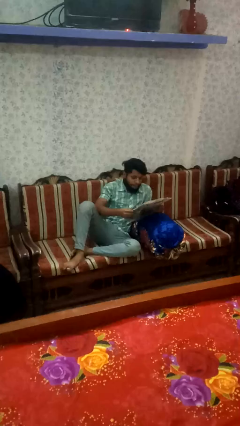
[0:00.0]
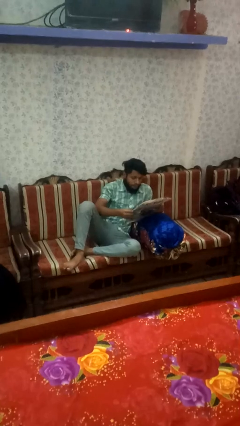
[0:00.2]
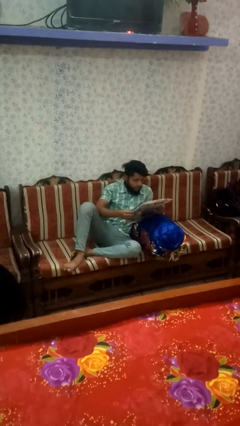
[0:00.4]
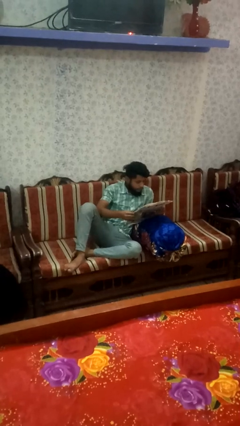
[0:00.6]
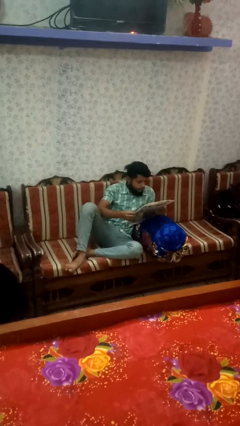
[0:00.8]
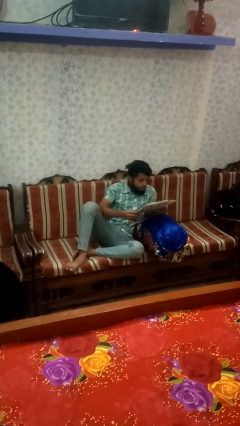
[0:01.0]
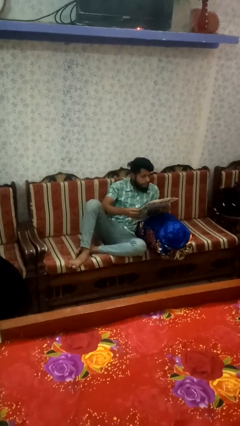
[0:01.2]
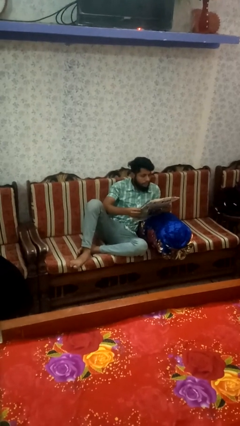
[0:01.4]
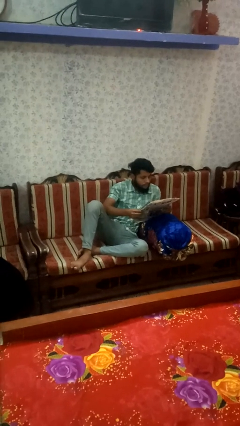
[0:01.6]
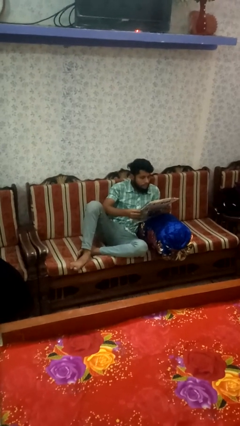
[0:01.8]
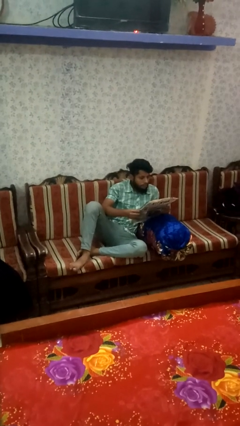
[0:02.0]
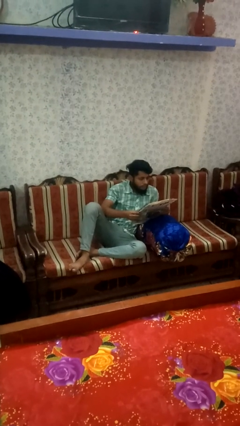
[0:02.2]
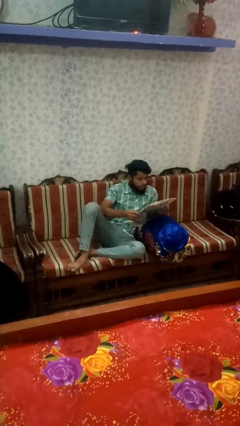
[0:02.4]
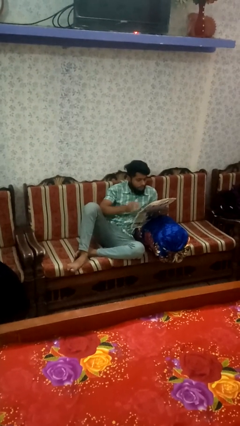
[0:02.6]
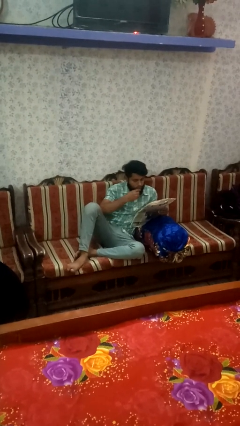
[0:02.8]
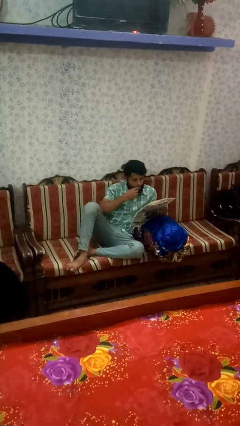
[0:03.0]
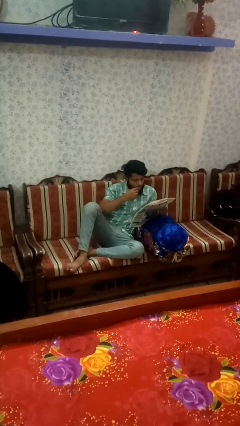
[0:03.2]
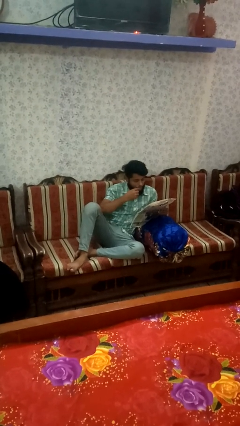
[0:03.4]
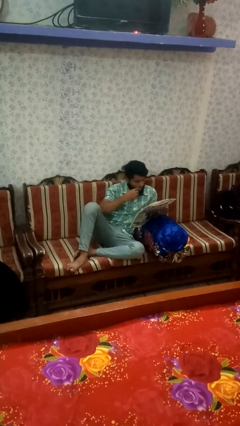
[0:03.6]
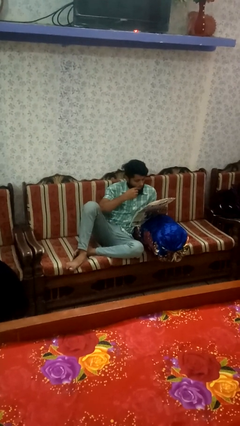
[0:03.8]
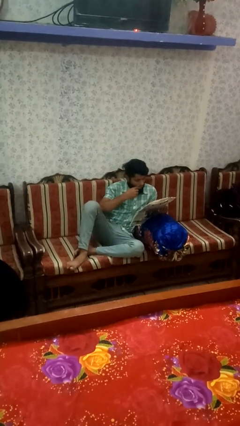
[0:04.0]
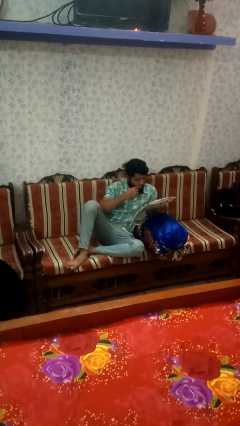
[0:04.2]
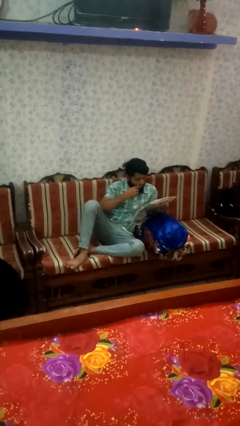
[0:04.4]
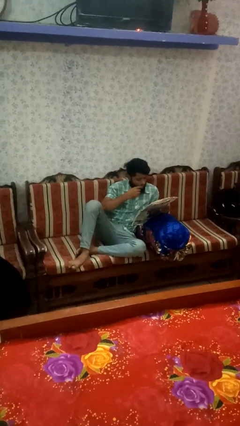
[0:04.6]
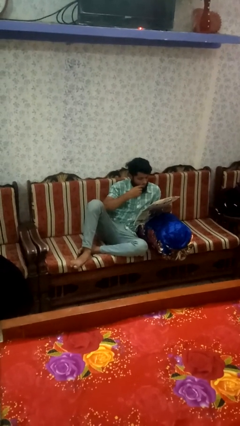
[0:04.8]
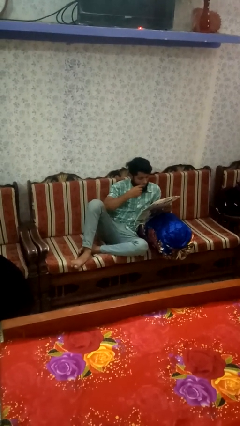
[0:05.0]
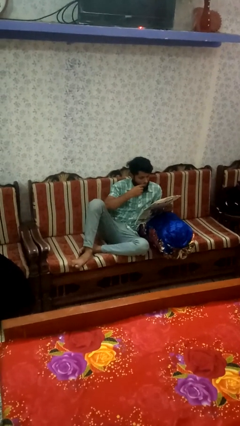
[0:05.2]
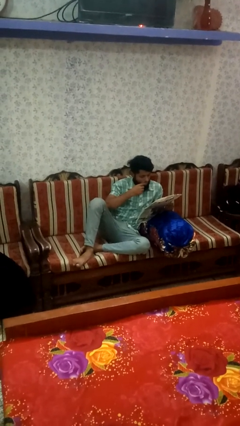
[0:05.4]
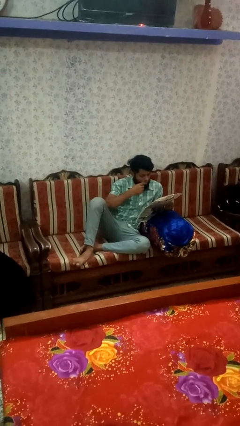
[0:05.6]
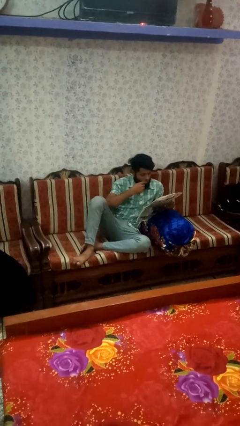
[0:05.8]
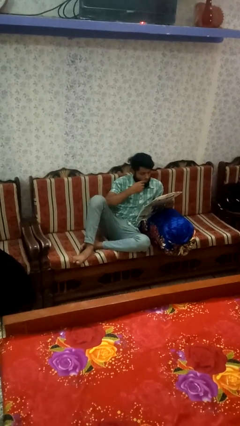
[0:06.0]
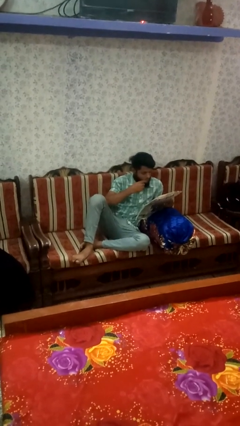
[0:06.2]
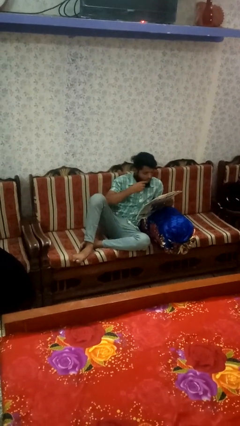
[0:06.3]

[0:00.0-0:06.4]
person reads newspaper

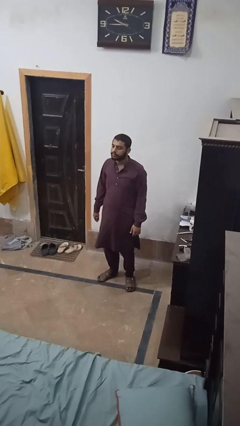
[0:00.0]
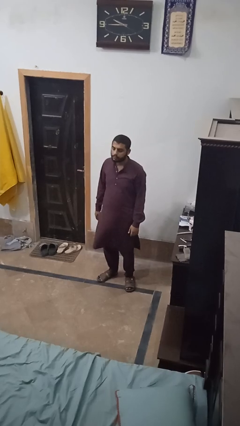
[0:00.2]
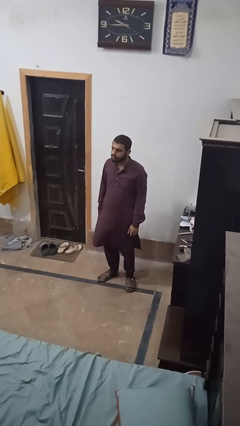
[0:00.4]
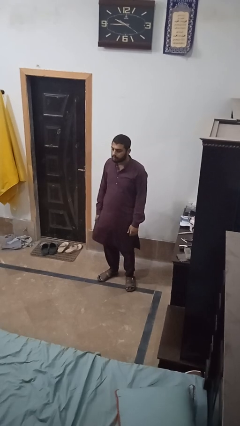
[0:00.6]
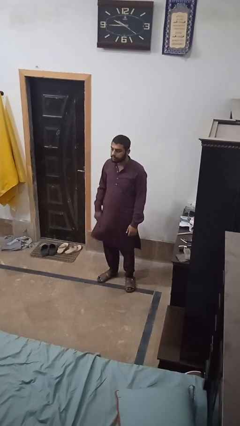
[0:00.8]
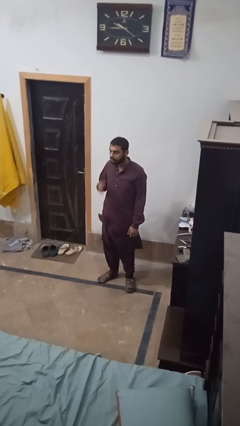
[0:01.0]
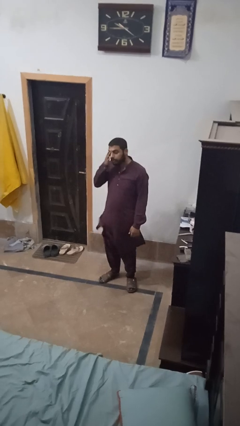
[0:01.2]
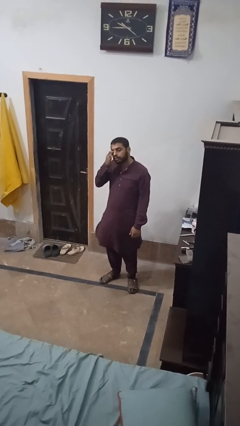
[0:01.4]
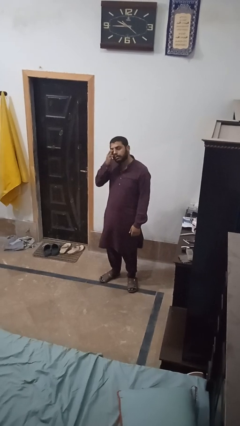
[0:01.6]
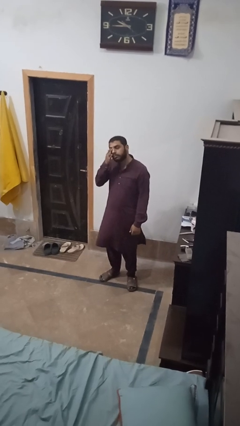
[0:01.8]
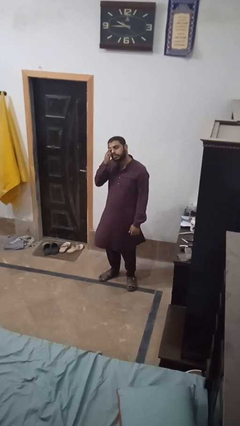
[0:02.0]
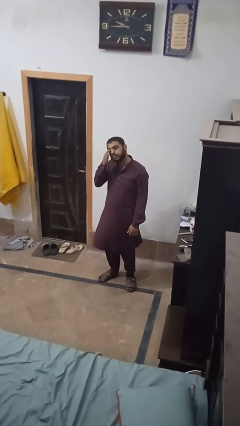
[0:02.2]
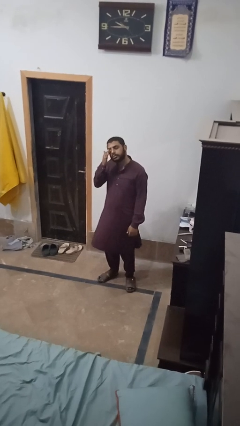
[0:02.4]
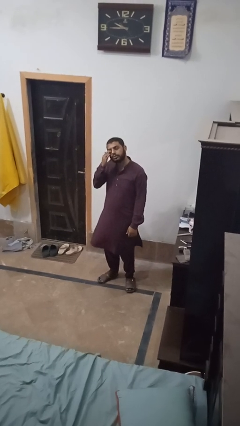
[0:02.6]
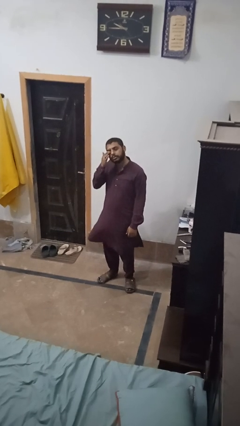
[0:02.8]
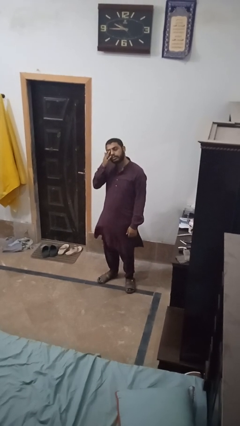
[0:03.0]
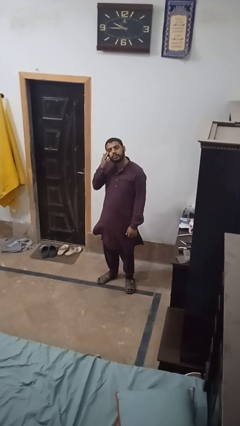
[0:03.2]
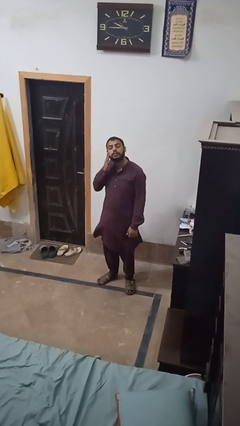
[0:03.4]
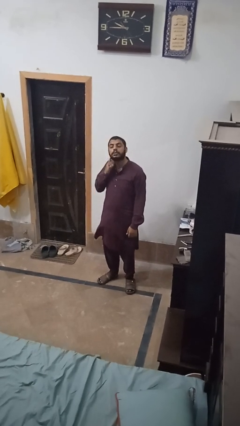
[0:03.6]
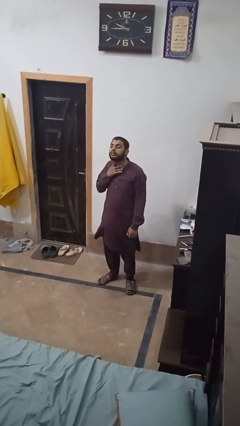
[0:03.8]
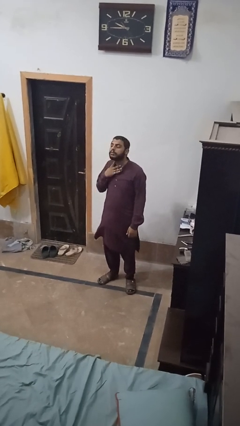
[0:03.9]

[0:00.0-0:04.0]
person rubs eyes

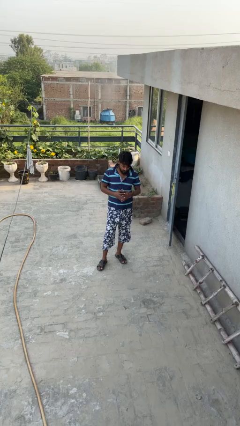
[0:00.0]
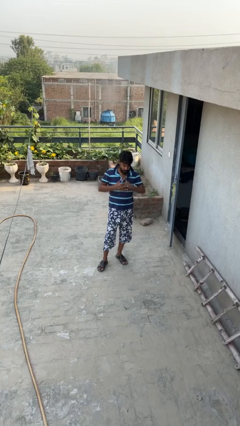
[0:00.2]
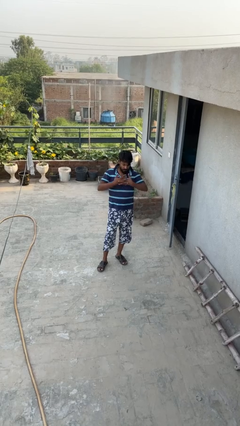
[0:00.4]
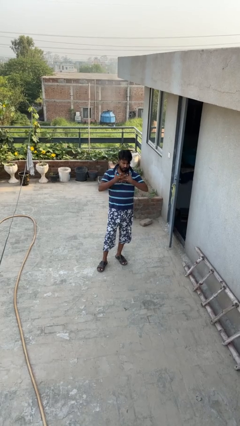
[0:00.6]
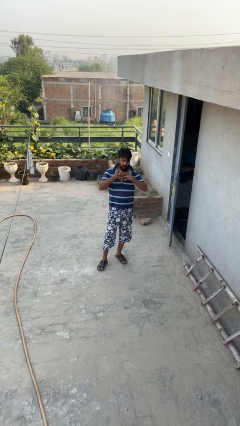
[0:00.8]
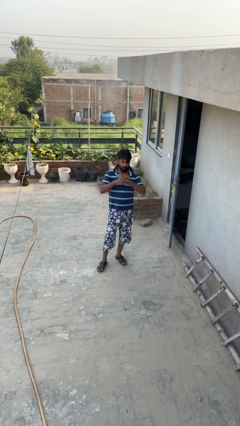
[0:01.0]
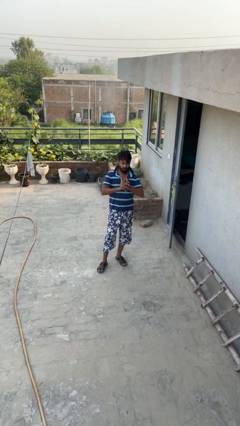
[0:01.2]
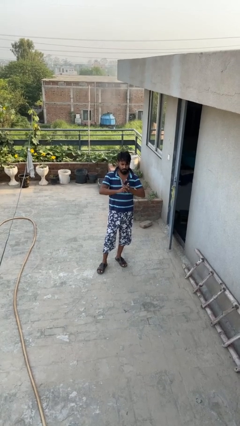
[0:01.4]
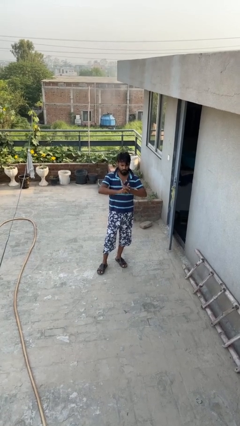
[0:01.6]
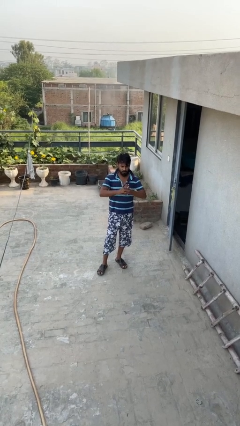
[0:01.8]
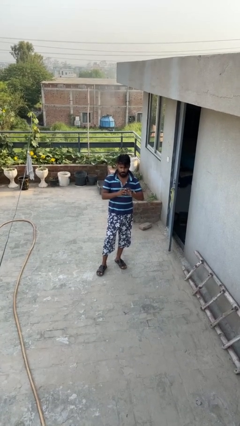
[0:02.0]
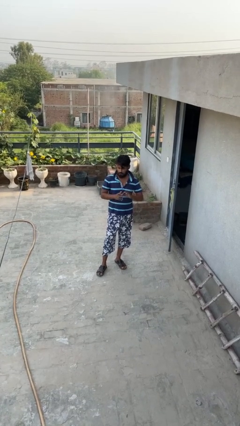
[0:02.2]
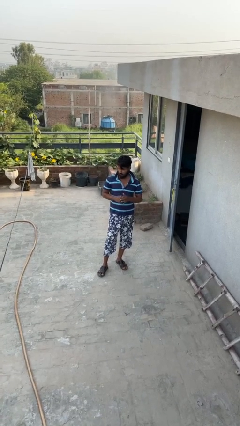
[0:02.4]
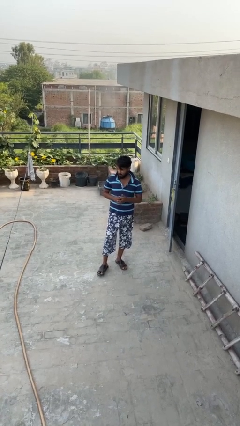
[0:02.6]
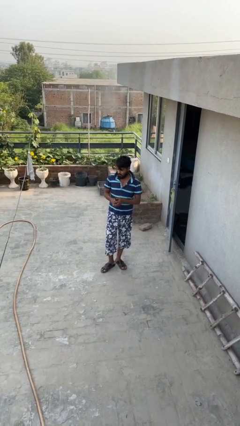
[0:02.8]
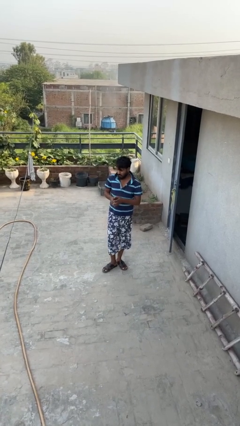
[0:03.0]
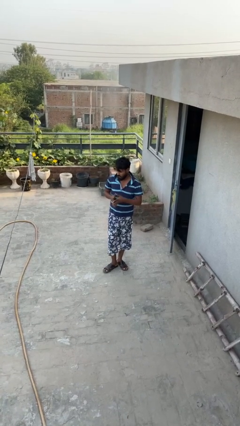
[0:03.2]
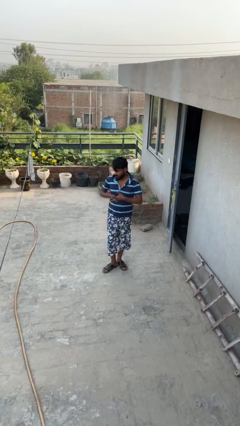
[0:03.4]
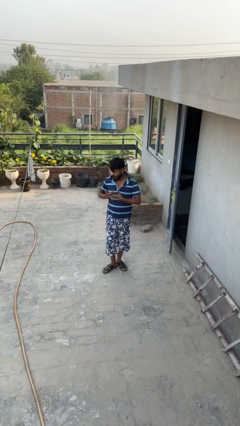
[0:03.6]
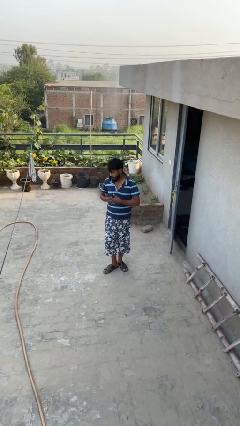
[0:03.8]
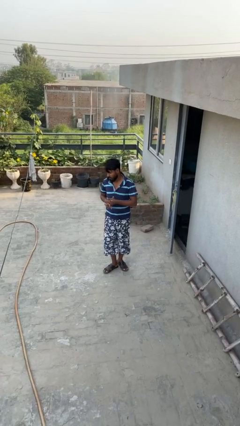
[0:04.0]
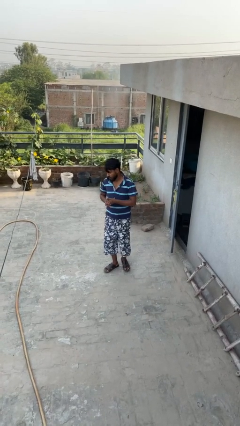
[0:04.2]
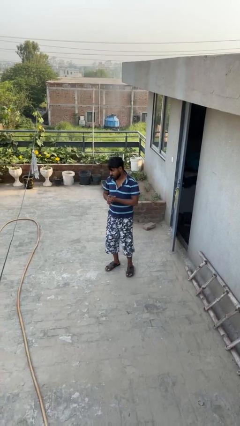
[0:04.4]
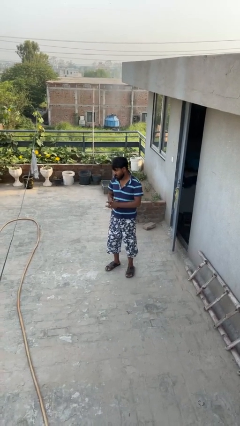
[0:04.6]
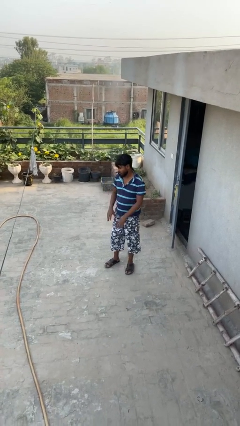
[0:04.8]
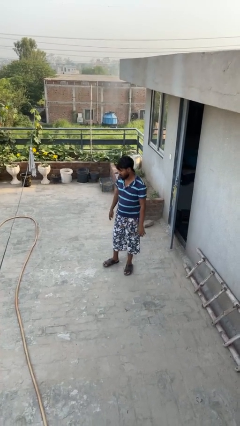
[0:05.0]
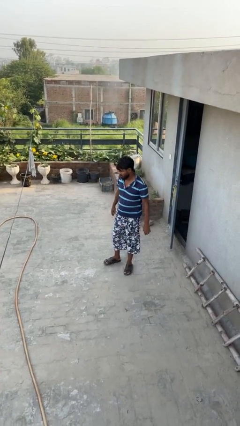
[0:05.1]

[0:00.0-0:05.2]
person cracks knuckles

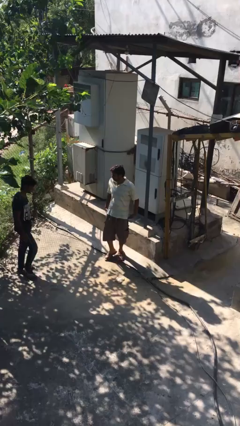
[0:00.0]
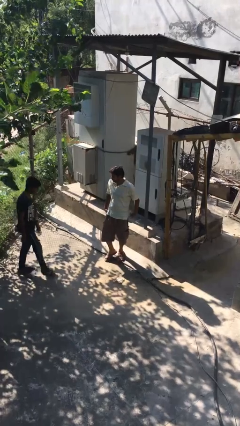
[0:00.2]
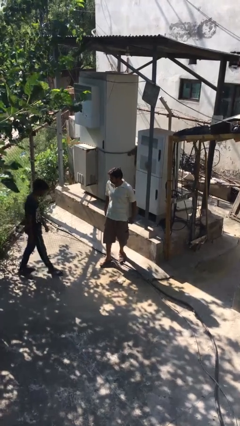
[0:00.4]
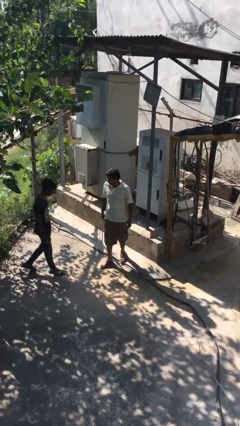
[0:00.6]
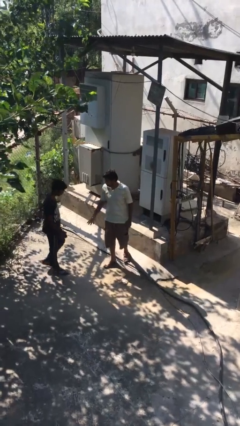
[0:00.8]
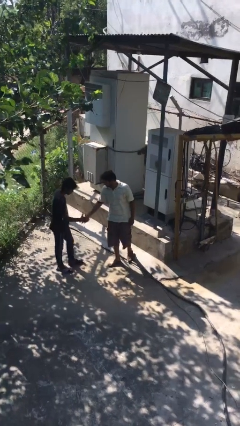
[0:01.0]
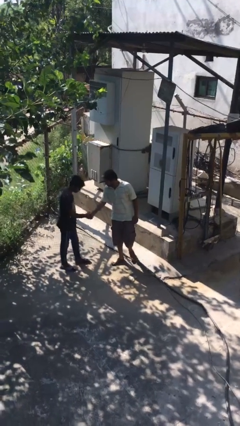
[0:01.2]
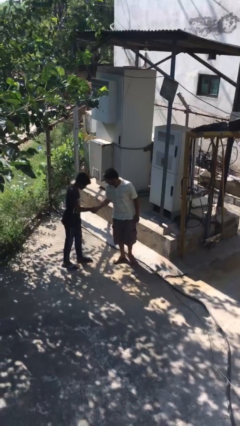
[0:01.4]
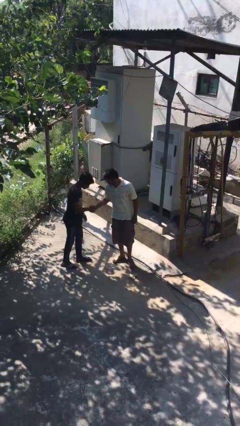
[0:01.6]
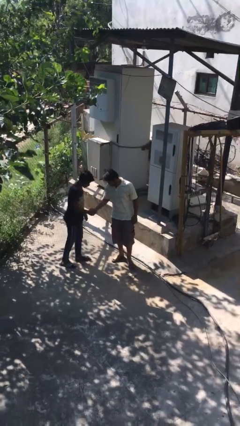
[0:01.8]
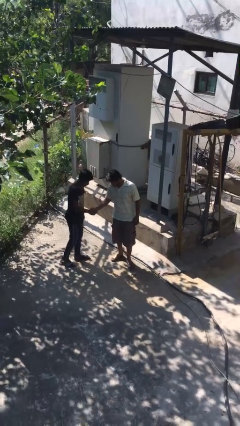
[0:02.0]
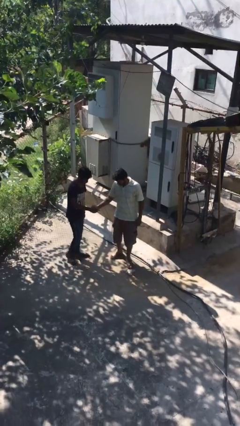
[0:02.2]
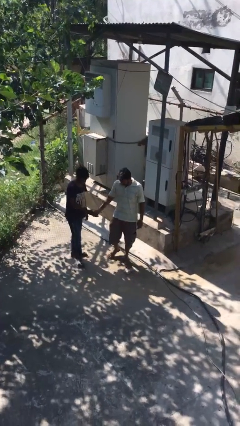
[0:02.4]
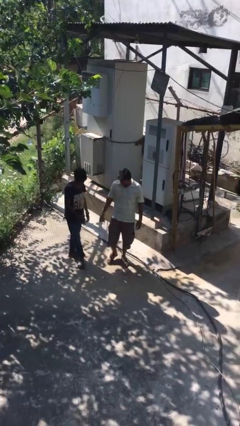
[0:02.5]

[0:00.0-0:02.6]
person shakes hand
